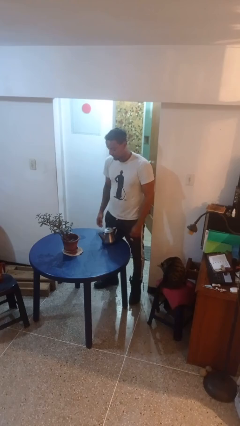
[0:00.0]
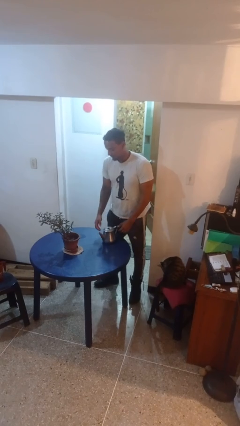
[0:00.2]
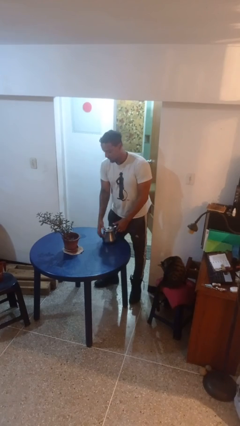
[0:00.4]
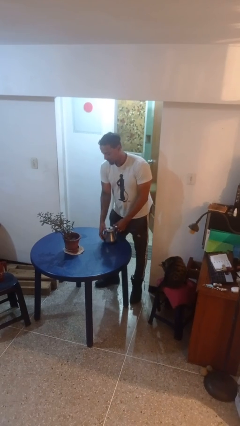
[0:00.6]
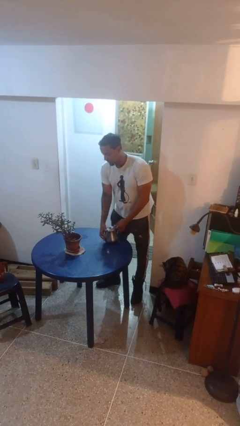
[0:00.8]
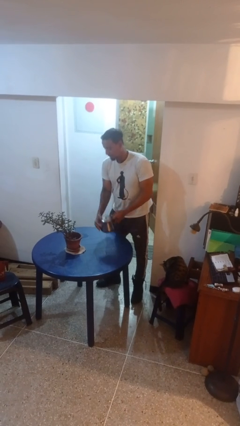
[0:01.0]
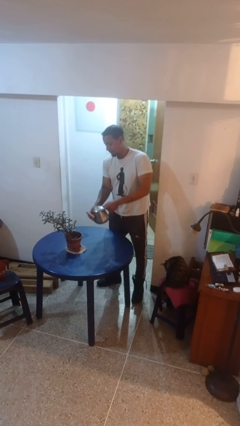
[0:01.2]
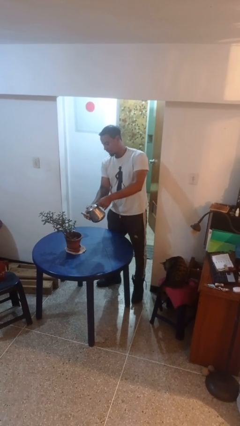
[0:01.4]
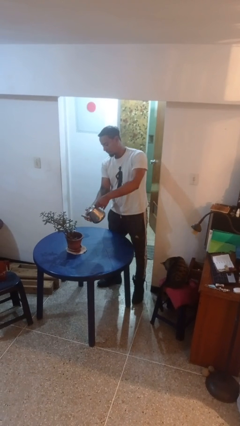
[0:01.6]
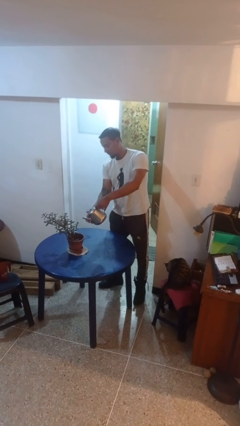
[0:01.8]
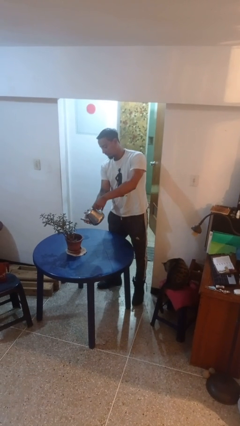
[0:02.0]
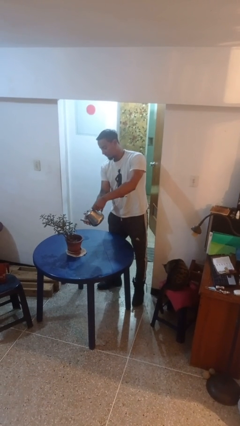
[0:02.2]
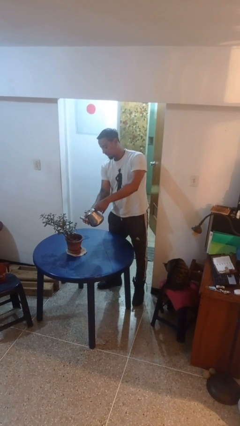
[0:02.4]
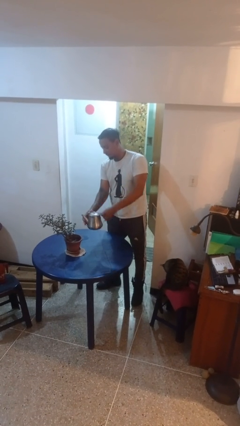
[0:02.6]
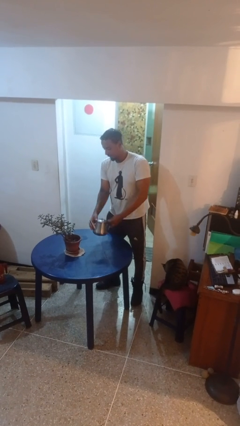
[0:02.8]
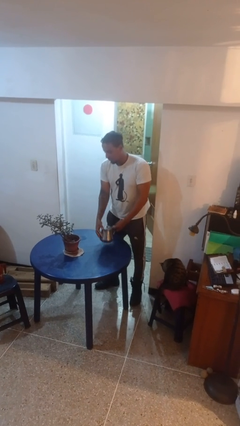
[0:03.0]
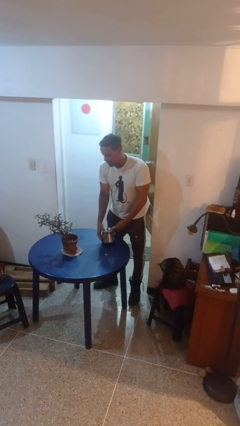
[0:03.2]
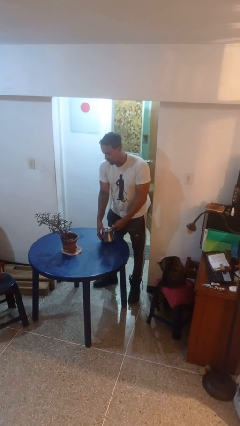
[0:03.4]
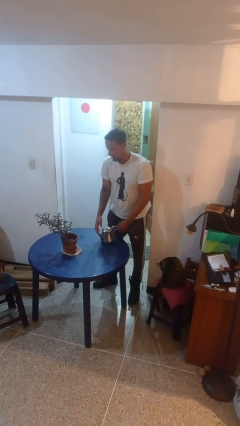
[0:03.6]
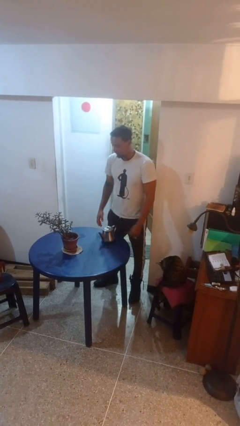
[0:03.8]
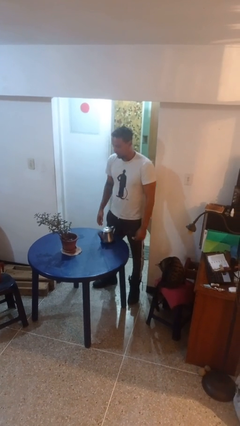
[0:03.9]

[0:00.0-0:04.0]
person waters houseplant

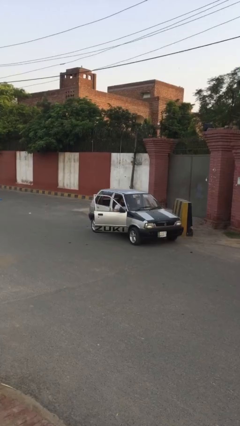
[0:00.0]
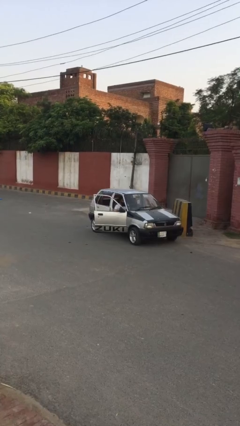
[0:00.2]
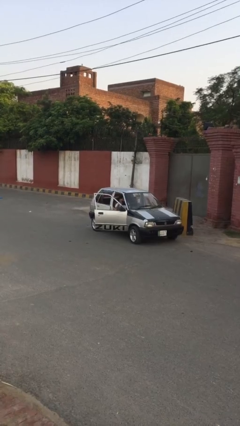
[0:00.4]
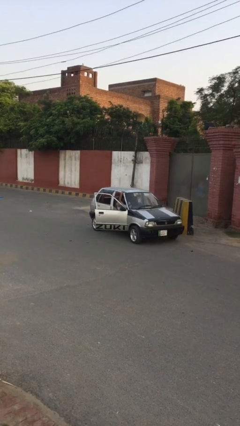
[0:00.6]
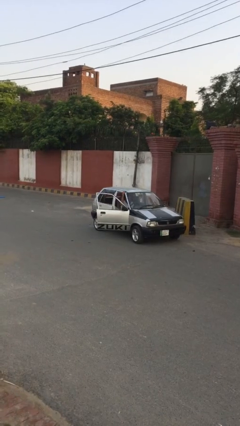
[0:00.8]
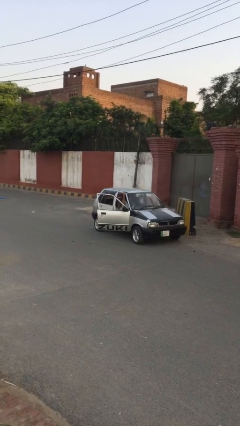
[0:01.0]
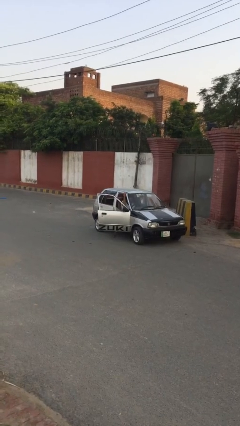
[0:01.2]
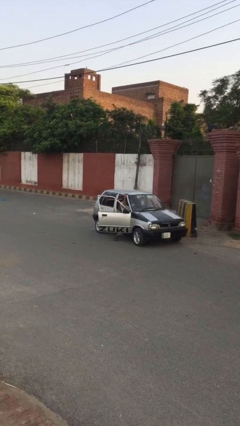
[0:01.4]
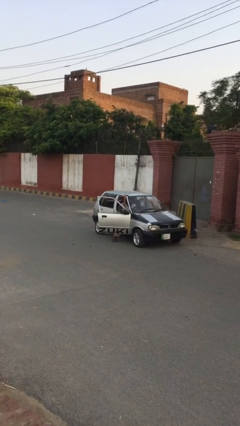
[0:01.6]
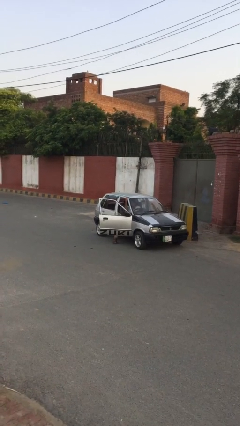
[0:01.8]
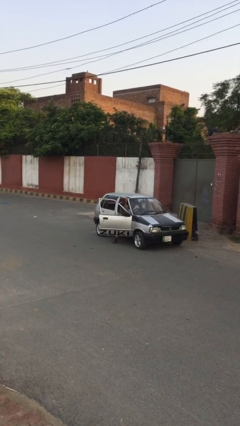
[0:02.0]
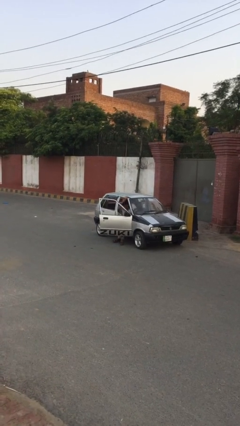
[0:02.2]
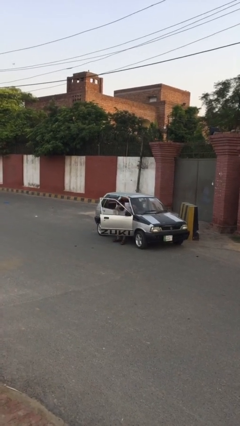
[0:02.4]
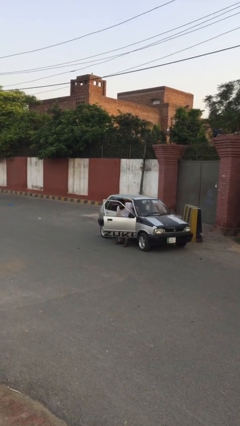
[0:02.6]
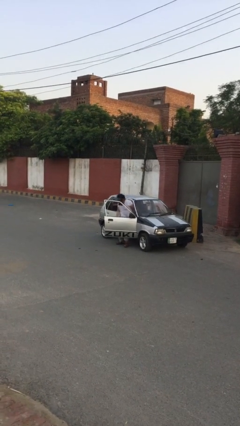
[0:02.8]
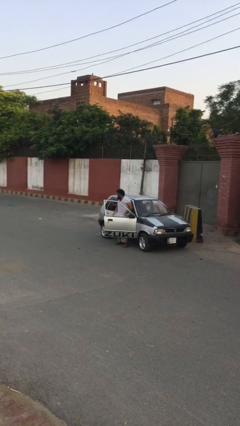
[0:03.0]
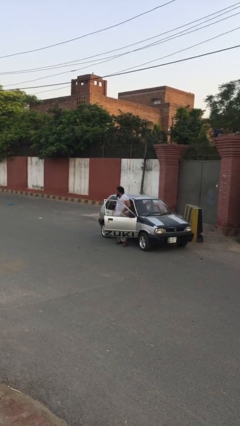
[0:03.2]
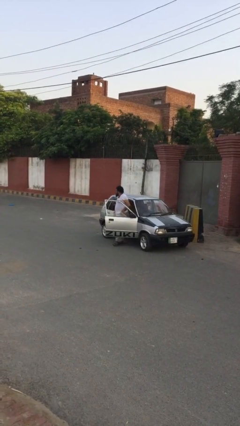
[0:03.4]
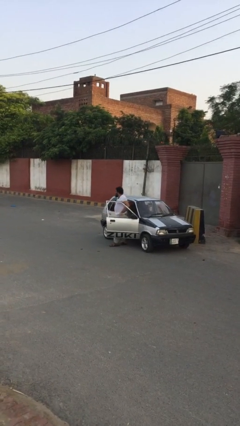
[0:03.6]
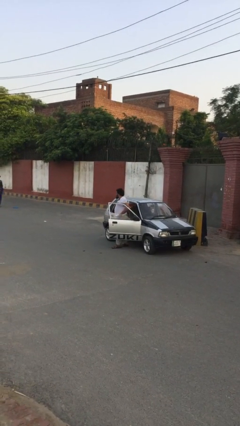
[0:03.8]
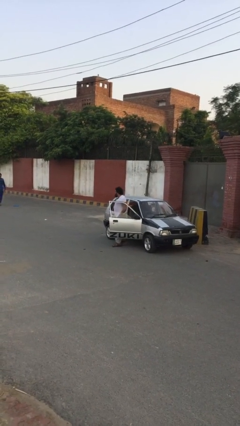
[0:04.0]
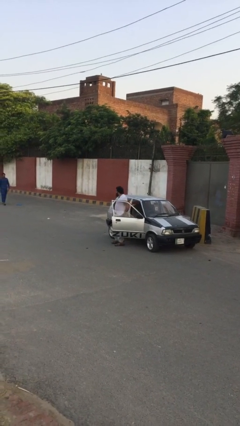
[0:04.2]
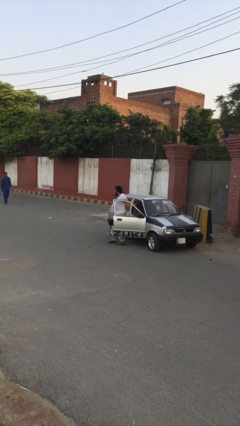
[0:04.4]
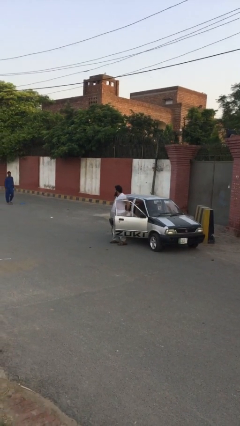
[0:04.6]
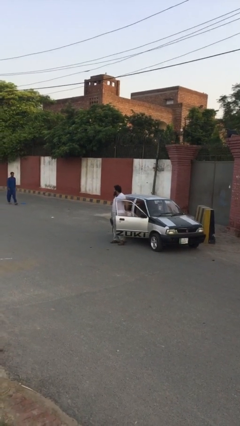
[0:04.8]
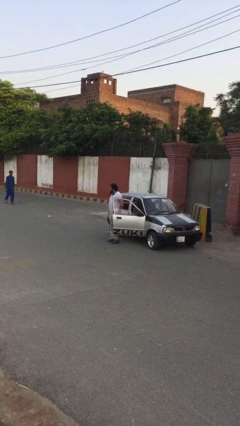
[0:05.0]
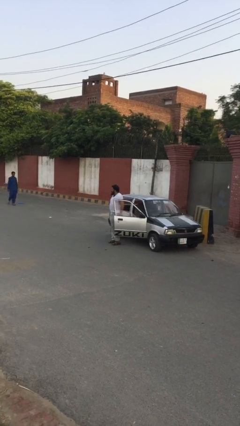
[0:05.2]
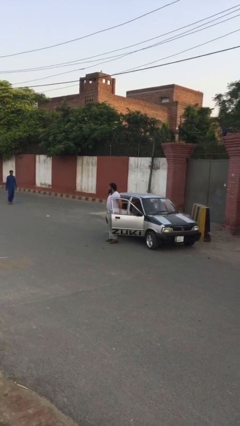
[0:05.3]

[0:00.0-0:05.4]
person exits car

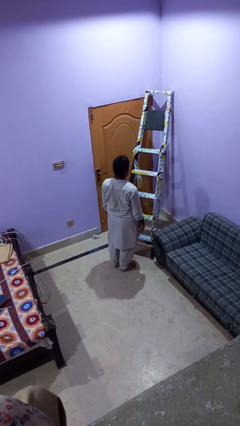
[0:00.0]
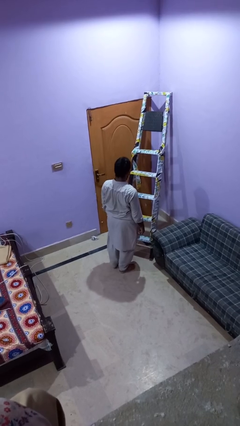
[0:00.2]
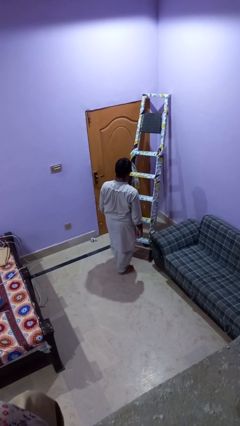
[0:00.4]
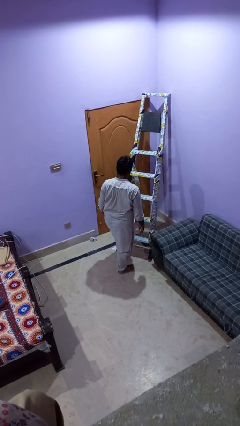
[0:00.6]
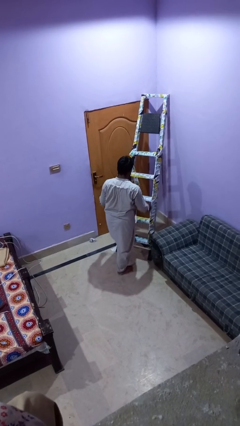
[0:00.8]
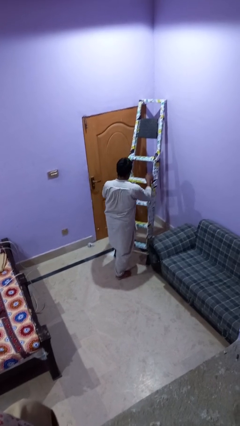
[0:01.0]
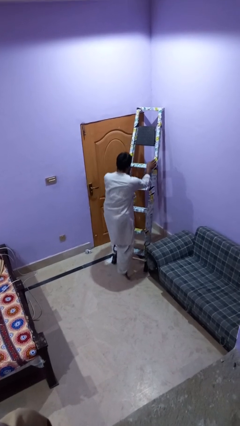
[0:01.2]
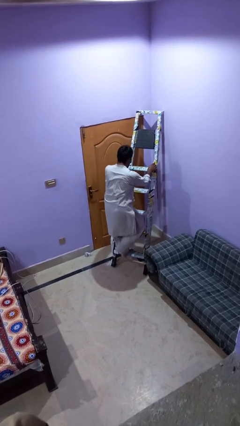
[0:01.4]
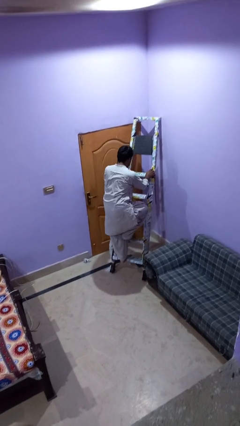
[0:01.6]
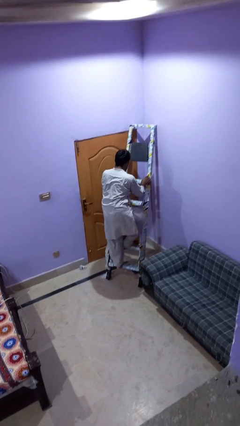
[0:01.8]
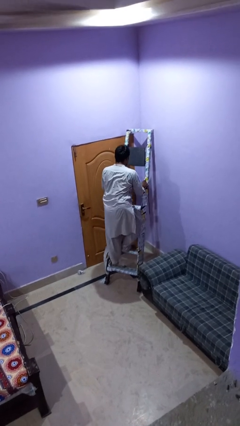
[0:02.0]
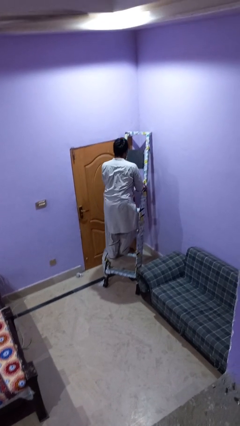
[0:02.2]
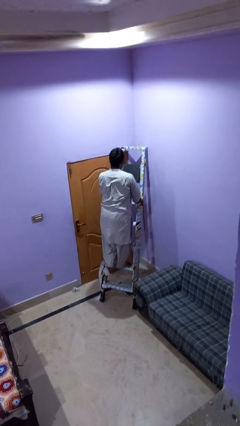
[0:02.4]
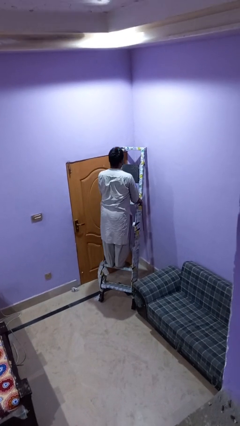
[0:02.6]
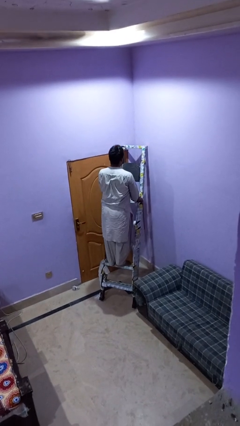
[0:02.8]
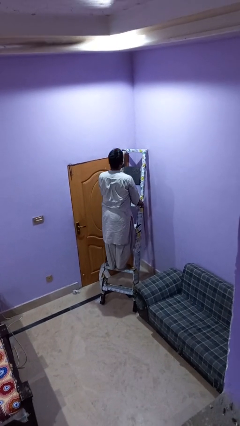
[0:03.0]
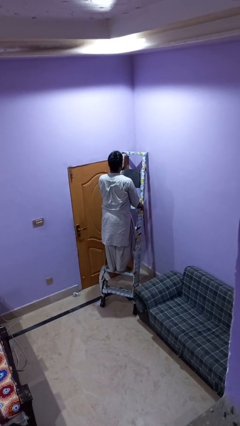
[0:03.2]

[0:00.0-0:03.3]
person climbs on chair

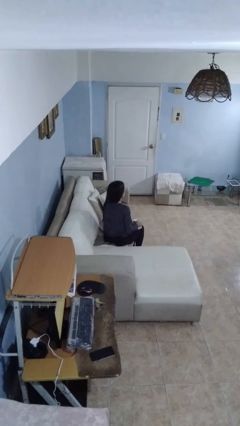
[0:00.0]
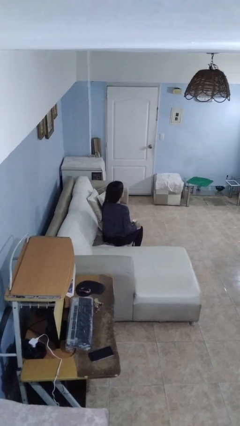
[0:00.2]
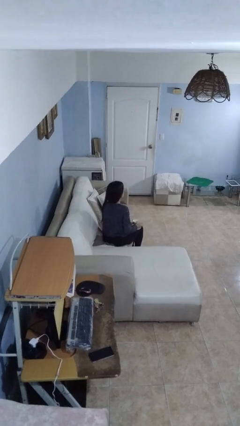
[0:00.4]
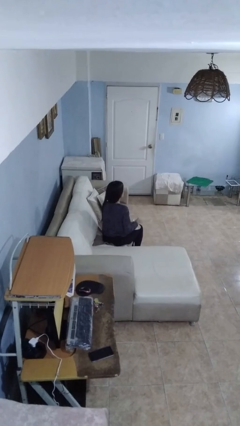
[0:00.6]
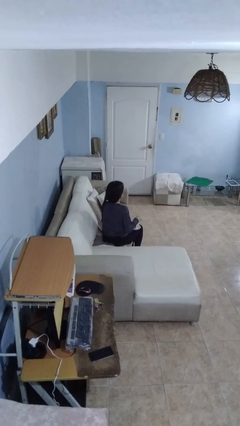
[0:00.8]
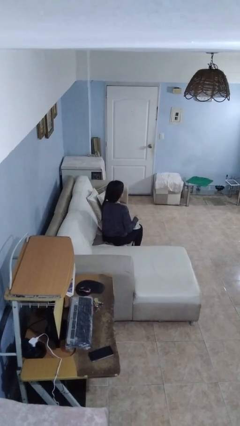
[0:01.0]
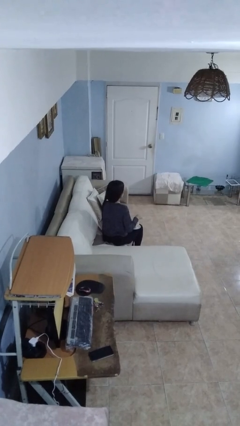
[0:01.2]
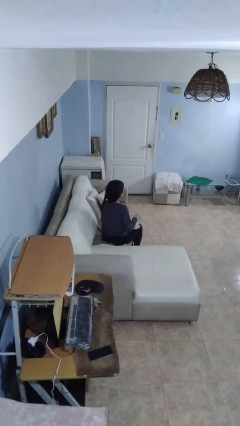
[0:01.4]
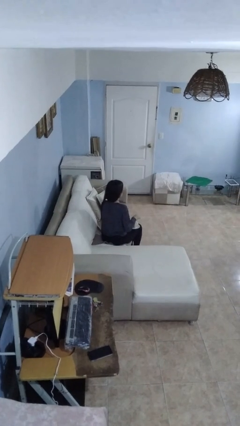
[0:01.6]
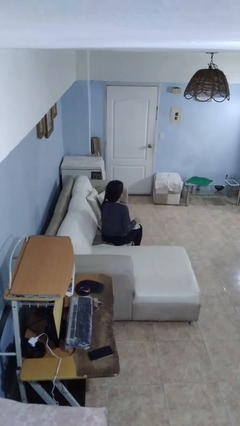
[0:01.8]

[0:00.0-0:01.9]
person stirs mug

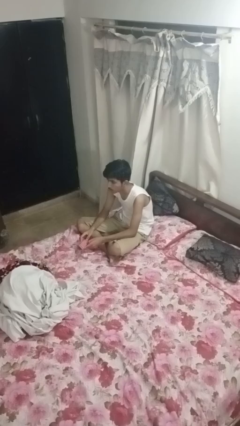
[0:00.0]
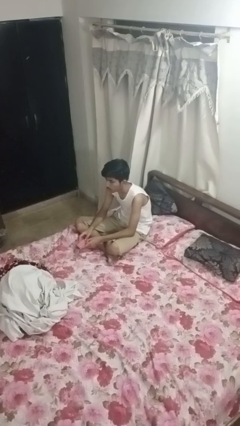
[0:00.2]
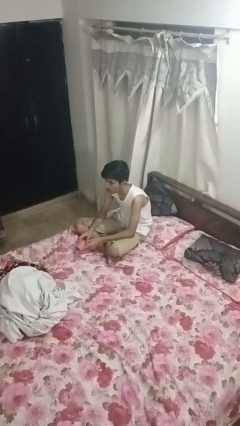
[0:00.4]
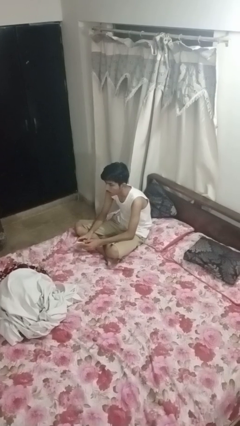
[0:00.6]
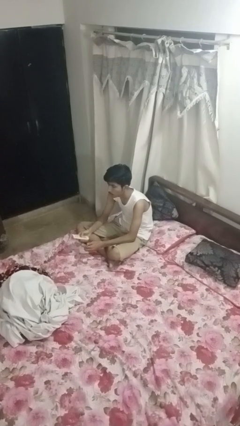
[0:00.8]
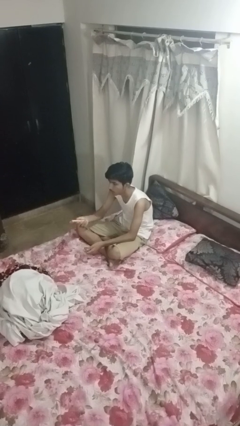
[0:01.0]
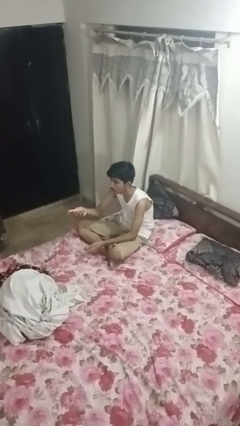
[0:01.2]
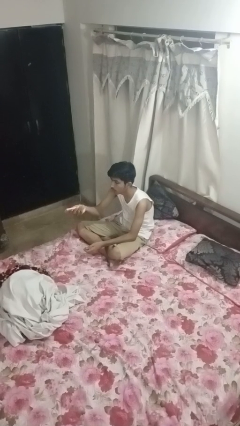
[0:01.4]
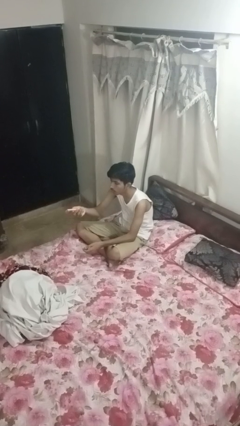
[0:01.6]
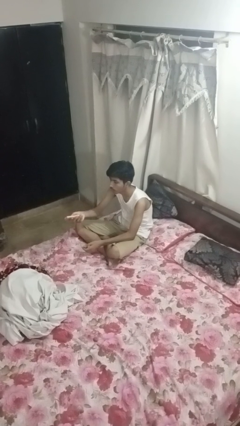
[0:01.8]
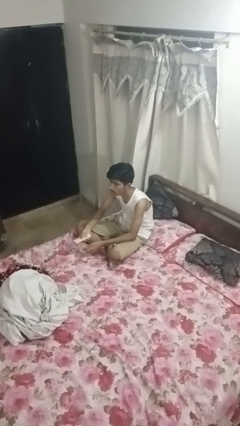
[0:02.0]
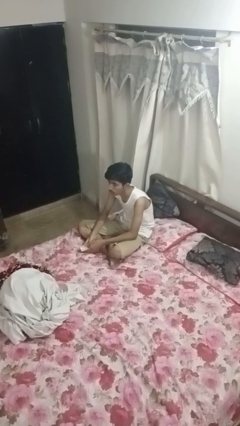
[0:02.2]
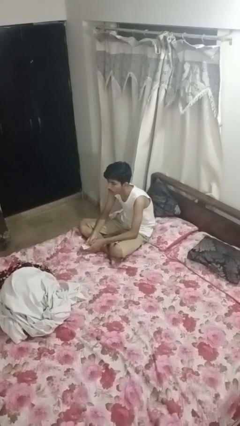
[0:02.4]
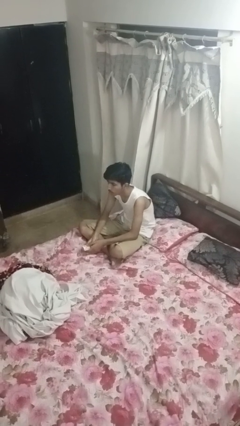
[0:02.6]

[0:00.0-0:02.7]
person uses television remote

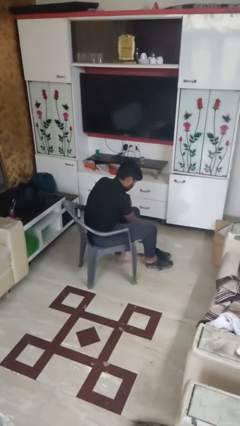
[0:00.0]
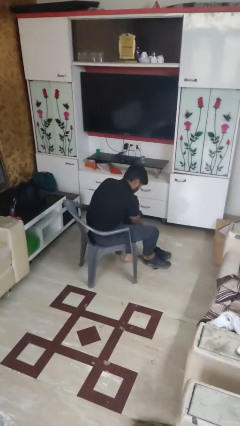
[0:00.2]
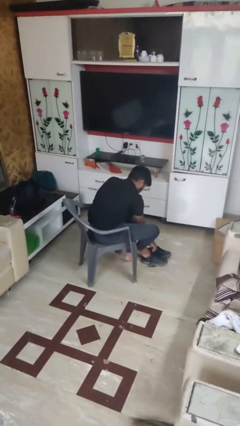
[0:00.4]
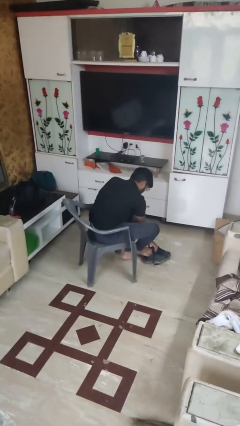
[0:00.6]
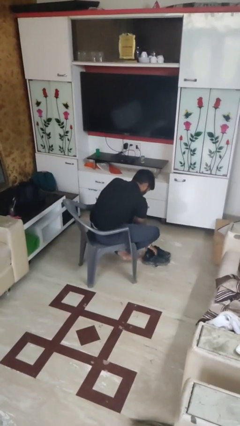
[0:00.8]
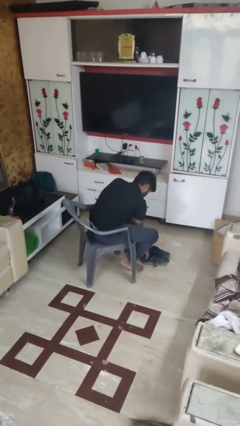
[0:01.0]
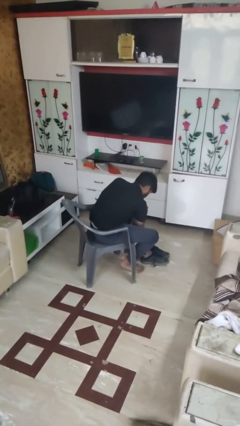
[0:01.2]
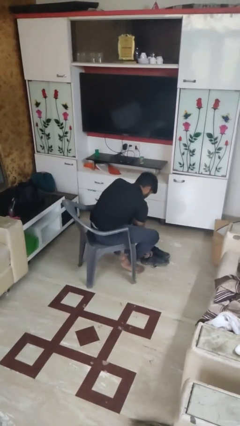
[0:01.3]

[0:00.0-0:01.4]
person takes off shoes
